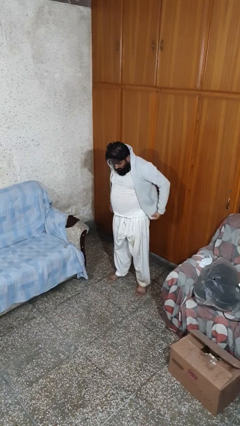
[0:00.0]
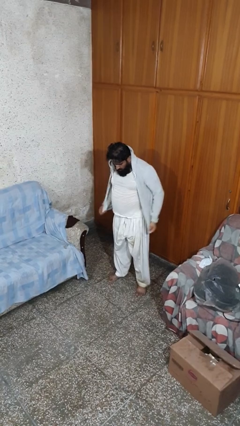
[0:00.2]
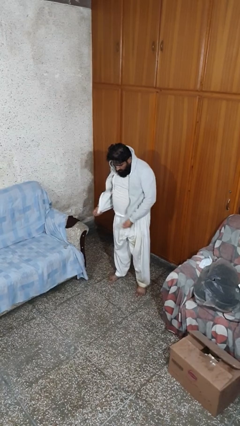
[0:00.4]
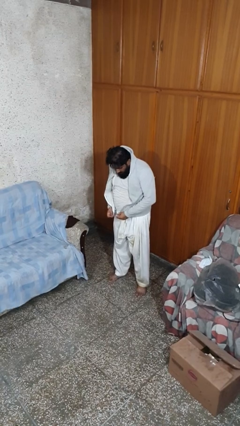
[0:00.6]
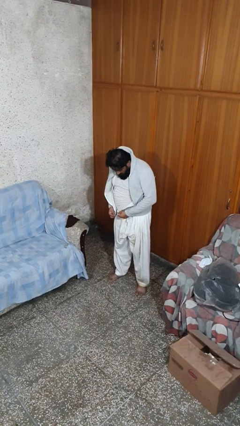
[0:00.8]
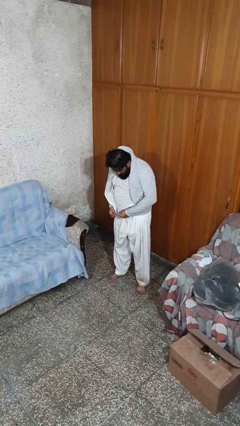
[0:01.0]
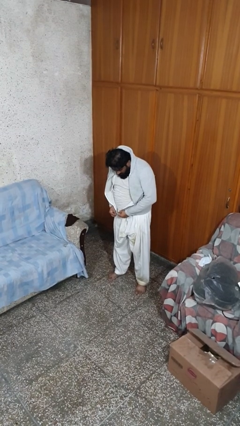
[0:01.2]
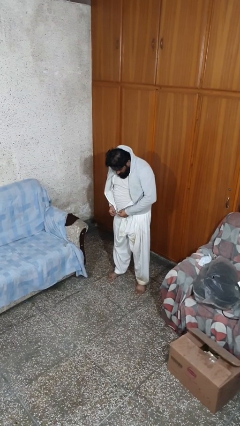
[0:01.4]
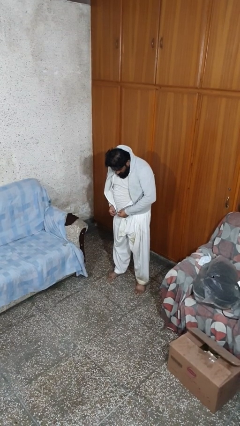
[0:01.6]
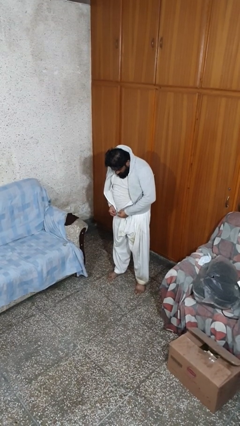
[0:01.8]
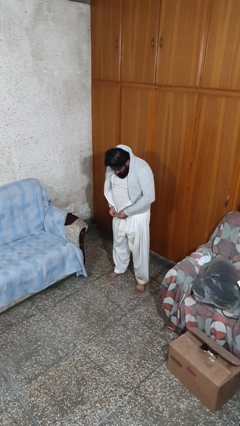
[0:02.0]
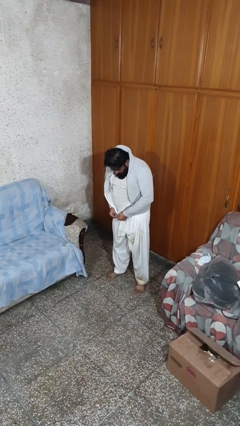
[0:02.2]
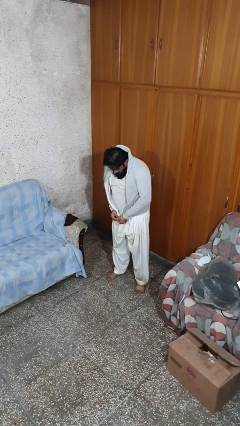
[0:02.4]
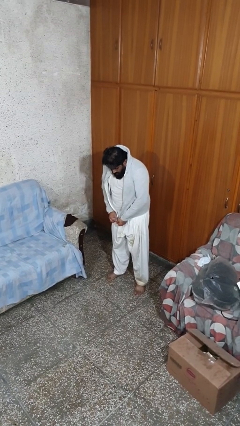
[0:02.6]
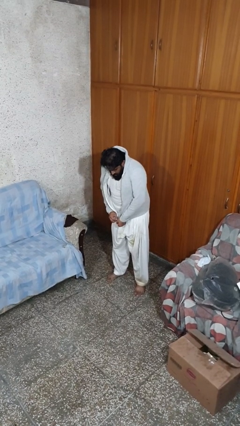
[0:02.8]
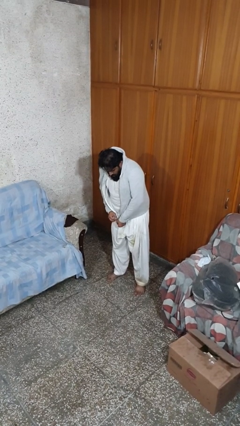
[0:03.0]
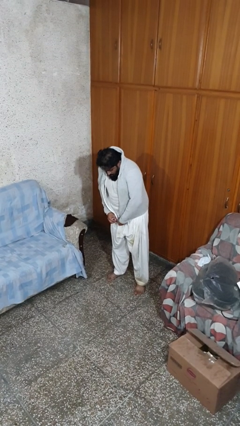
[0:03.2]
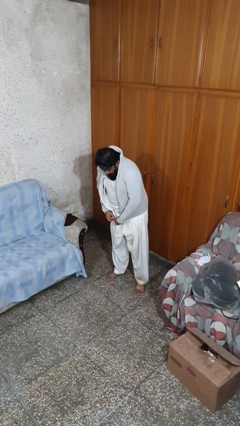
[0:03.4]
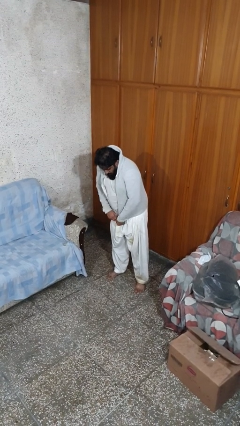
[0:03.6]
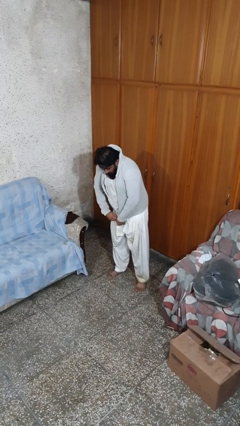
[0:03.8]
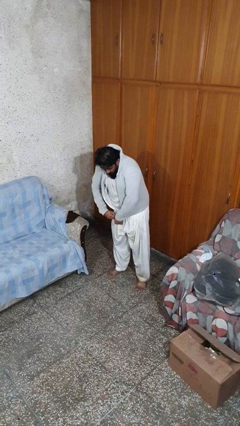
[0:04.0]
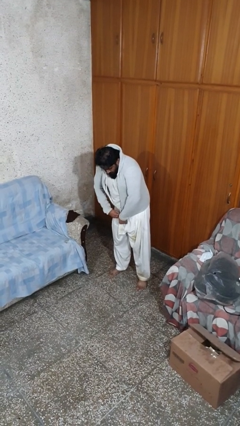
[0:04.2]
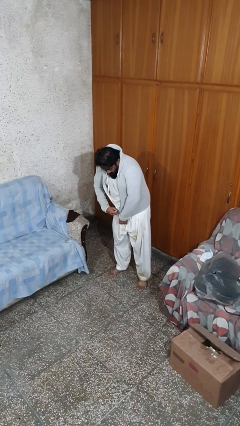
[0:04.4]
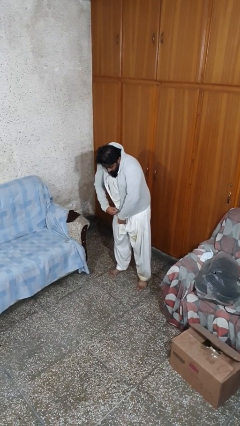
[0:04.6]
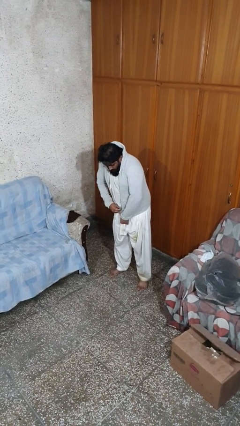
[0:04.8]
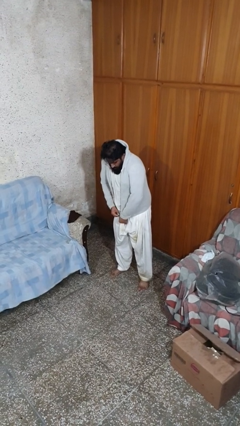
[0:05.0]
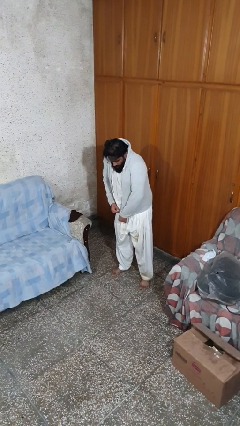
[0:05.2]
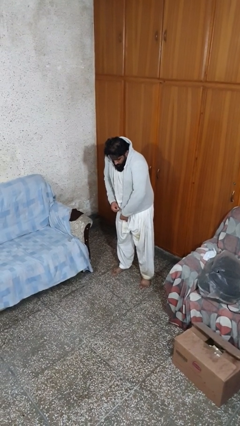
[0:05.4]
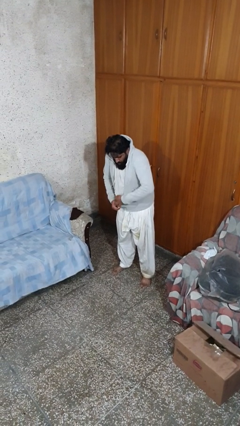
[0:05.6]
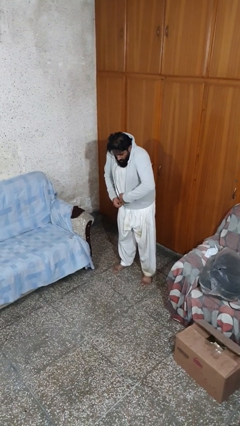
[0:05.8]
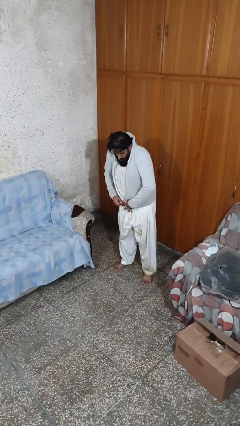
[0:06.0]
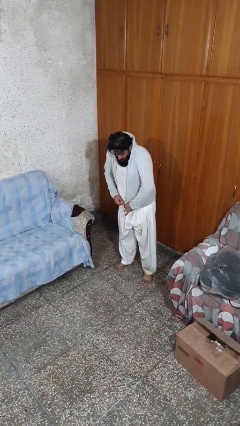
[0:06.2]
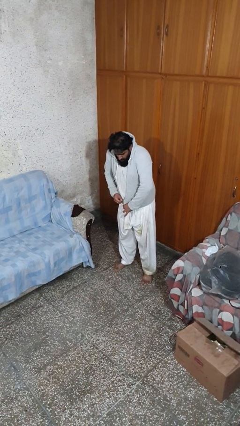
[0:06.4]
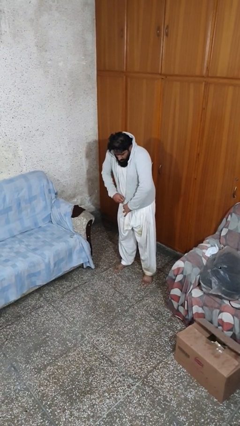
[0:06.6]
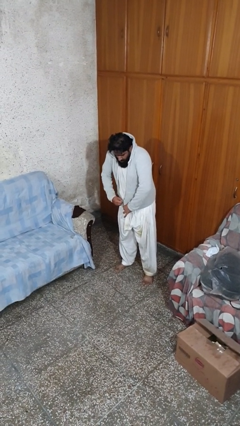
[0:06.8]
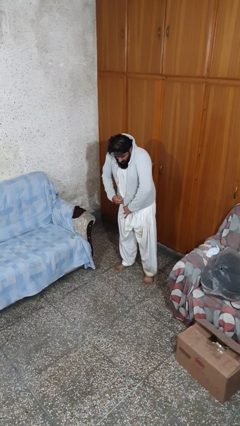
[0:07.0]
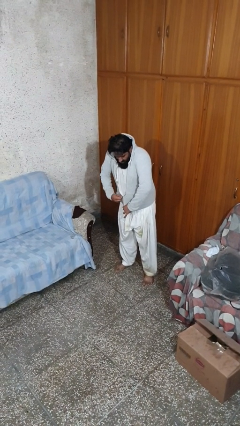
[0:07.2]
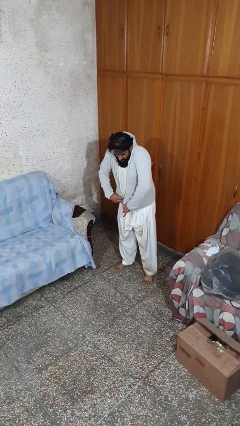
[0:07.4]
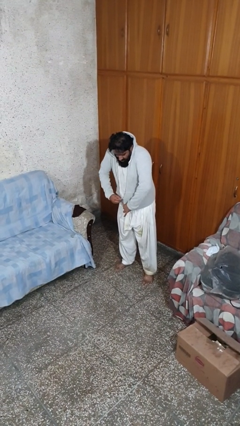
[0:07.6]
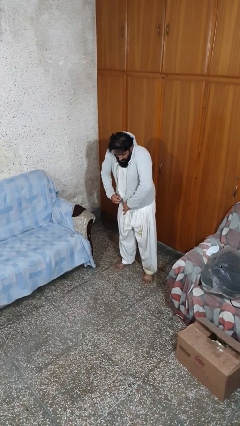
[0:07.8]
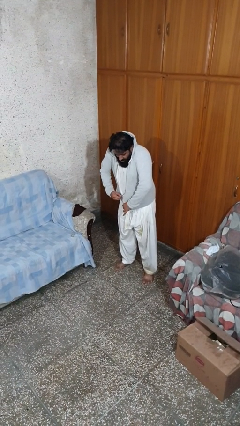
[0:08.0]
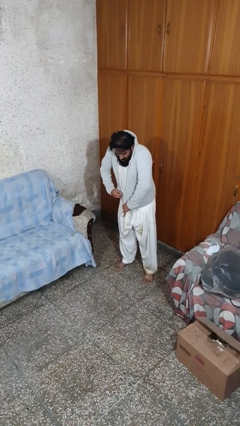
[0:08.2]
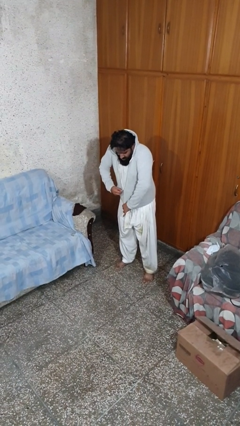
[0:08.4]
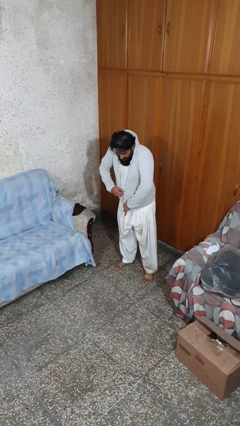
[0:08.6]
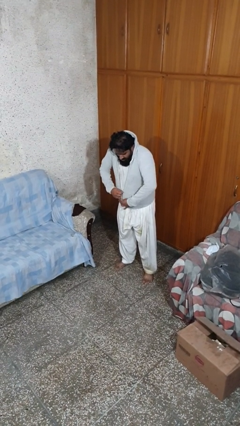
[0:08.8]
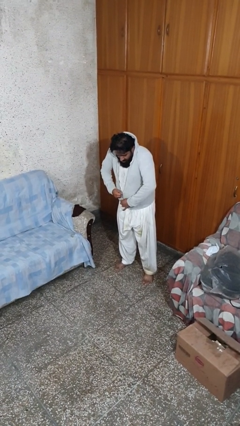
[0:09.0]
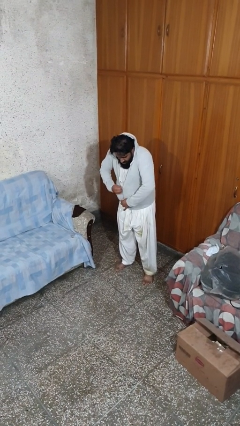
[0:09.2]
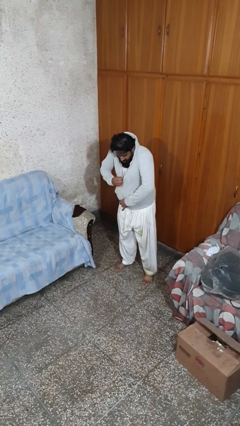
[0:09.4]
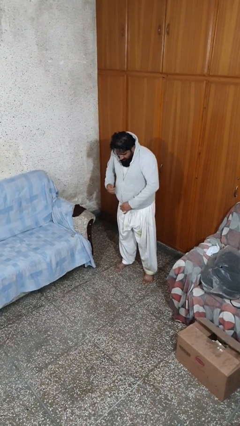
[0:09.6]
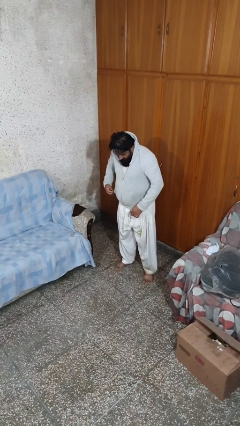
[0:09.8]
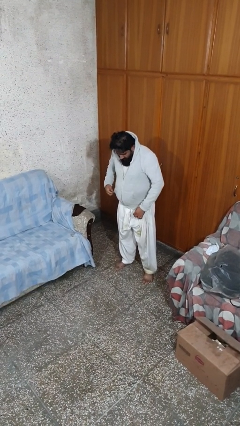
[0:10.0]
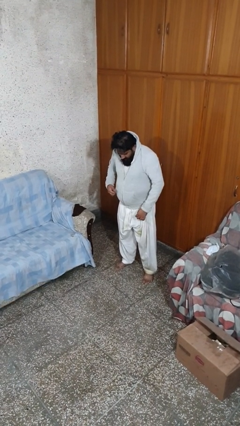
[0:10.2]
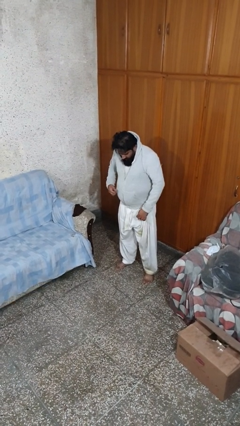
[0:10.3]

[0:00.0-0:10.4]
person zips up jacket

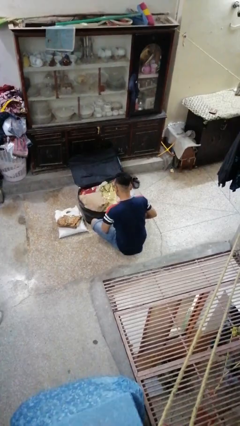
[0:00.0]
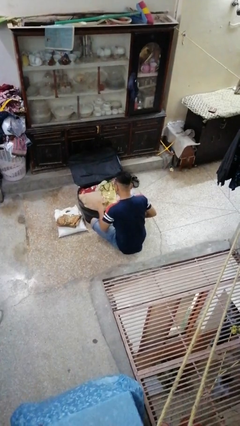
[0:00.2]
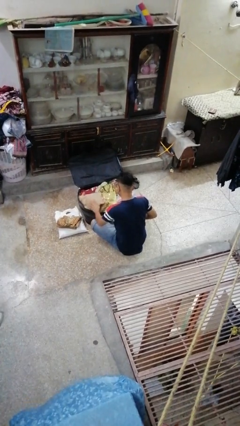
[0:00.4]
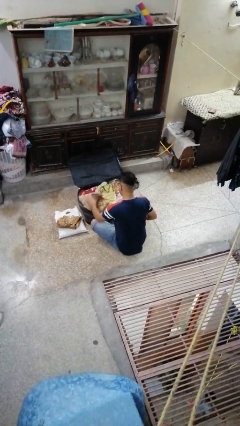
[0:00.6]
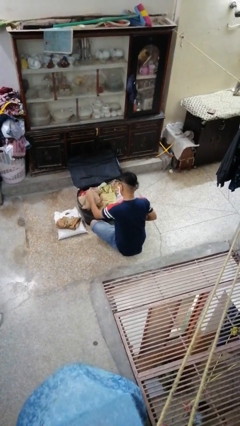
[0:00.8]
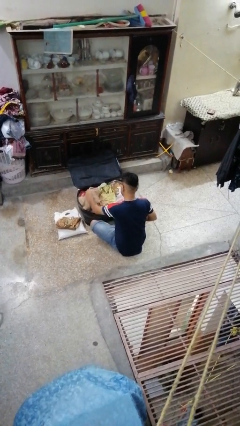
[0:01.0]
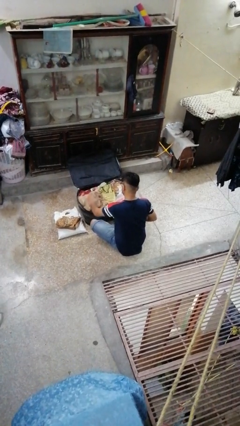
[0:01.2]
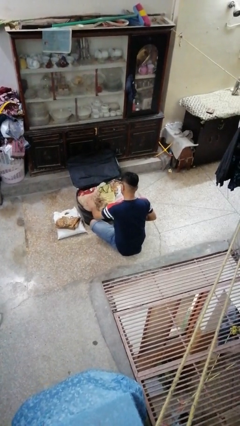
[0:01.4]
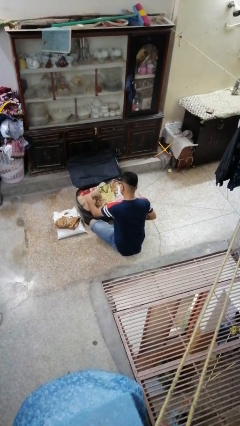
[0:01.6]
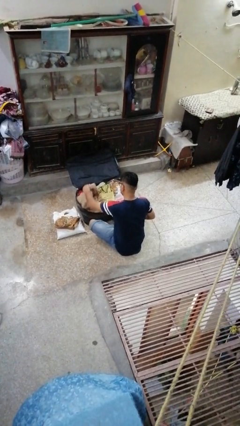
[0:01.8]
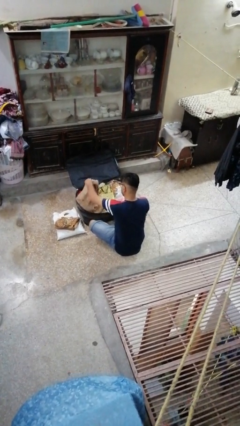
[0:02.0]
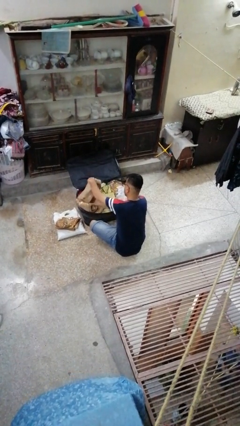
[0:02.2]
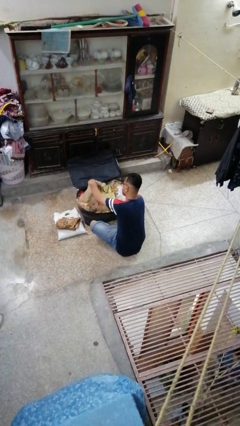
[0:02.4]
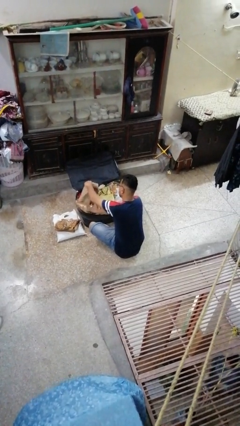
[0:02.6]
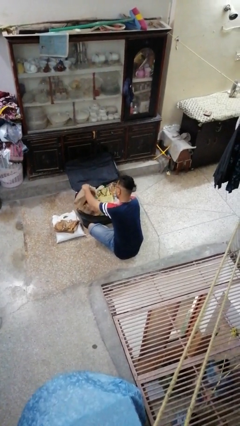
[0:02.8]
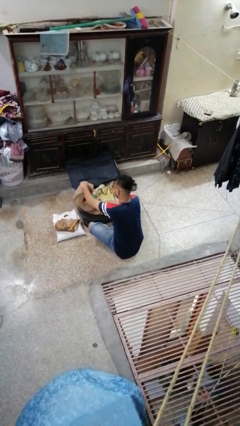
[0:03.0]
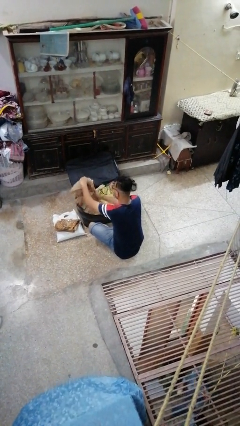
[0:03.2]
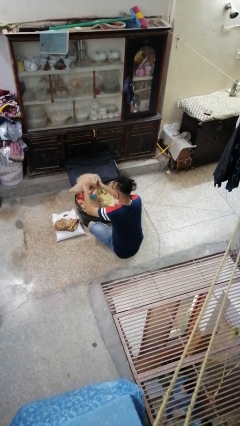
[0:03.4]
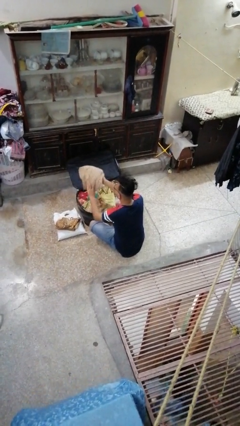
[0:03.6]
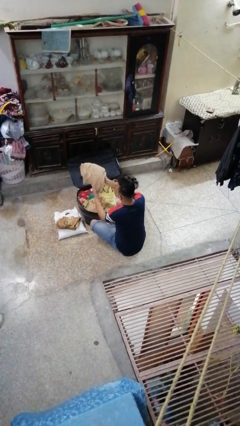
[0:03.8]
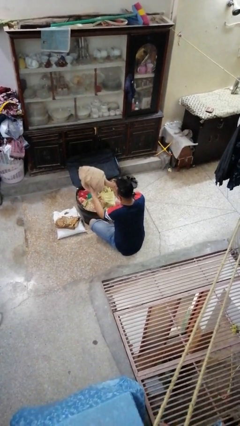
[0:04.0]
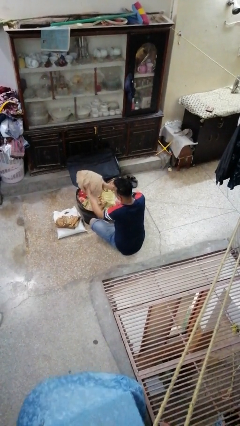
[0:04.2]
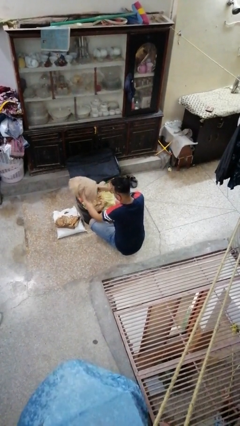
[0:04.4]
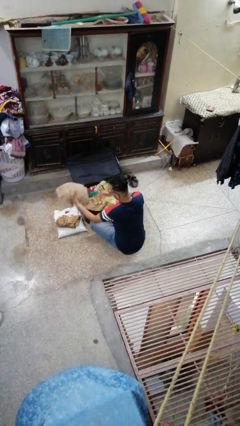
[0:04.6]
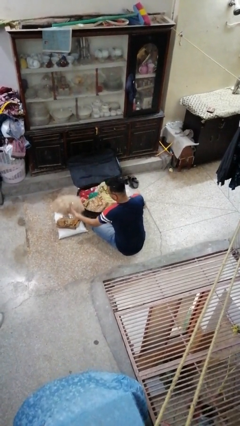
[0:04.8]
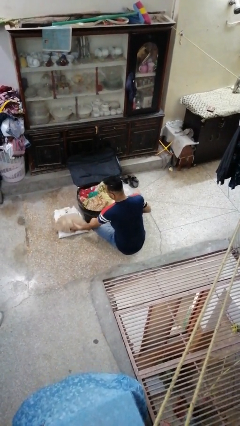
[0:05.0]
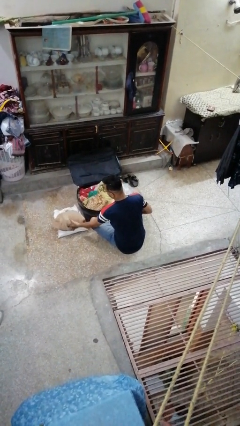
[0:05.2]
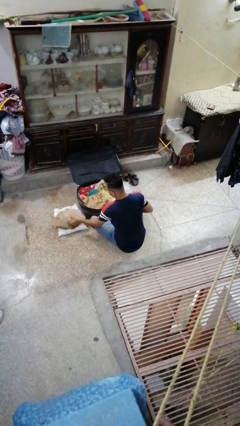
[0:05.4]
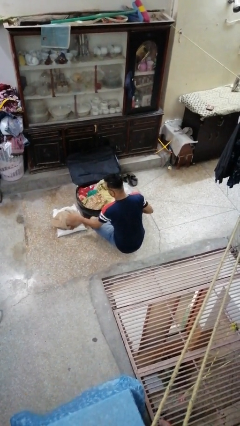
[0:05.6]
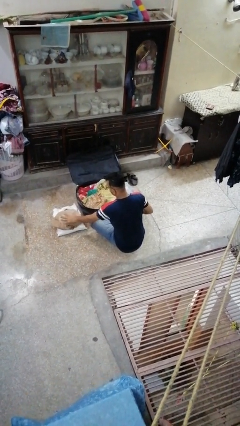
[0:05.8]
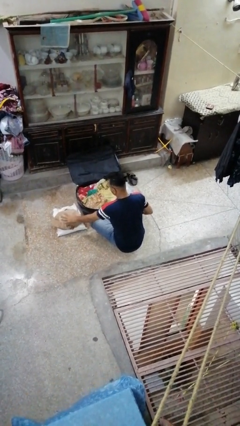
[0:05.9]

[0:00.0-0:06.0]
person unloads clothes from suitcase

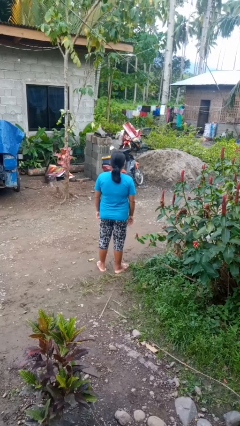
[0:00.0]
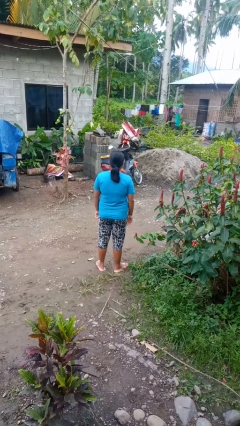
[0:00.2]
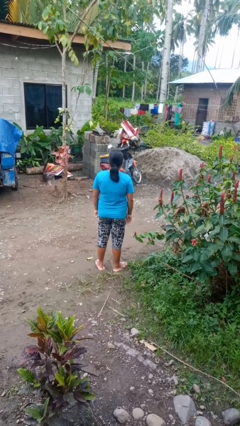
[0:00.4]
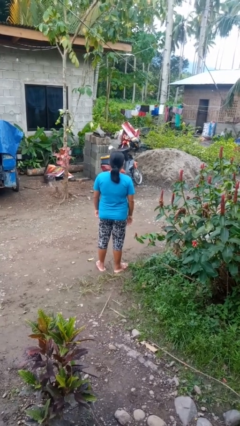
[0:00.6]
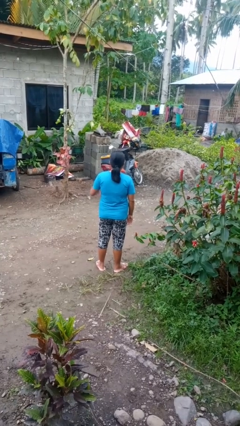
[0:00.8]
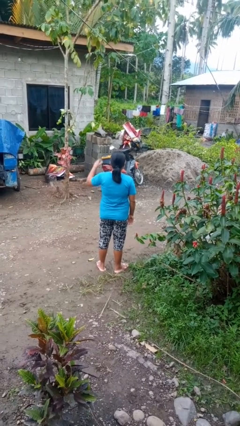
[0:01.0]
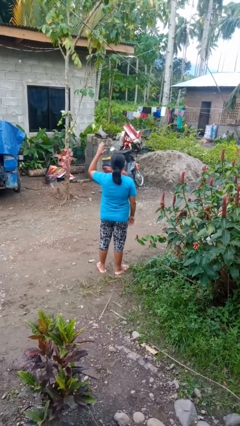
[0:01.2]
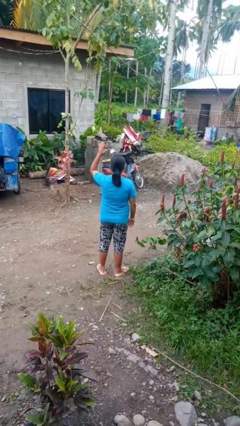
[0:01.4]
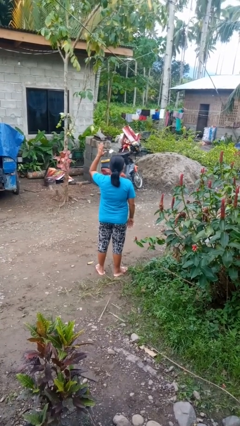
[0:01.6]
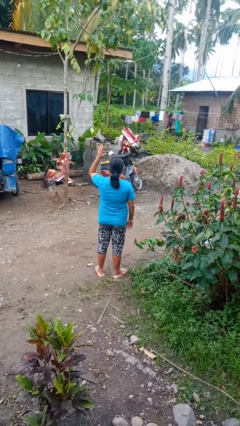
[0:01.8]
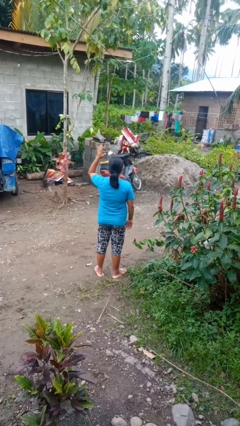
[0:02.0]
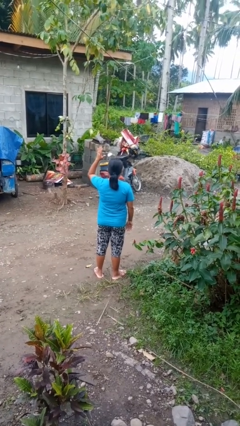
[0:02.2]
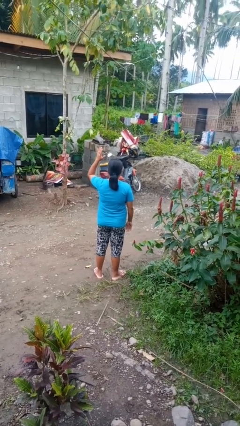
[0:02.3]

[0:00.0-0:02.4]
person gestures raise hand
